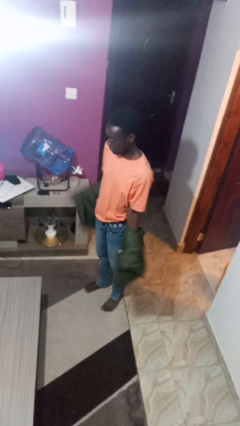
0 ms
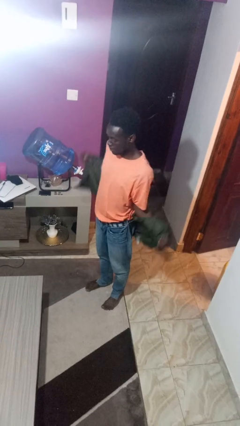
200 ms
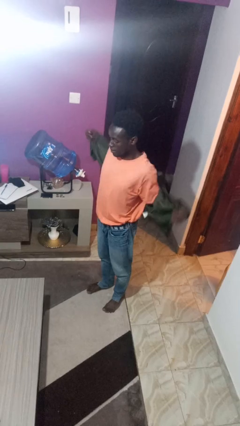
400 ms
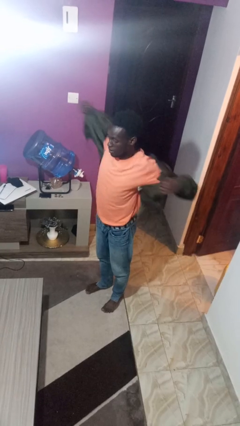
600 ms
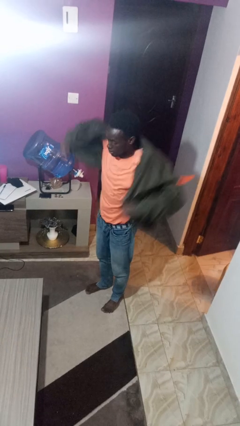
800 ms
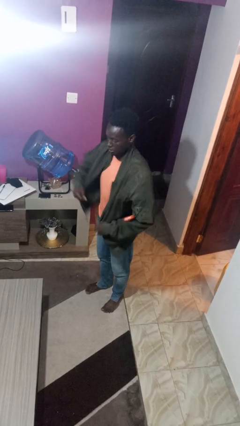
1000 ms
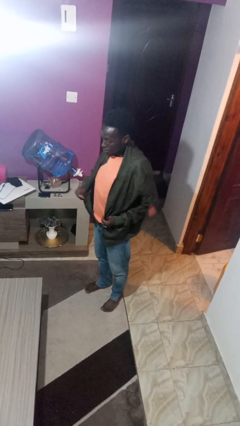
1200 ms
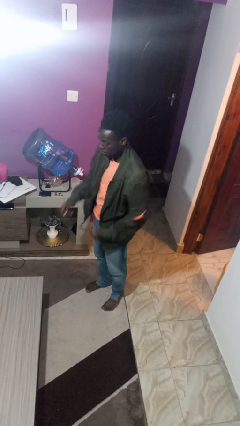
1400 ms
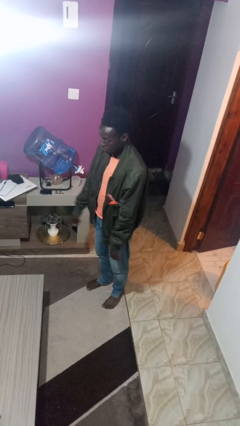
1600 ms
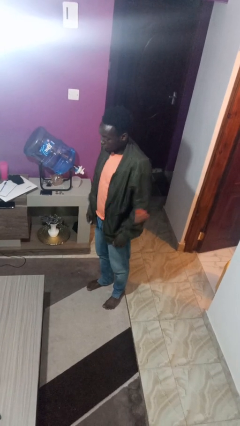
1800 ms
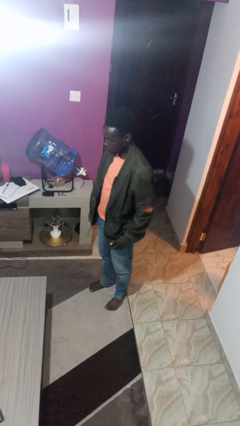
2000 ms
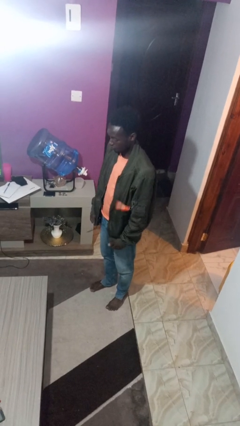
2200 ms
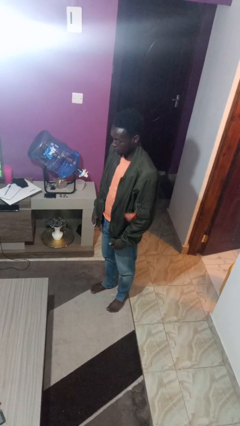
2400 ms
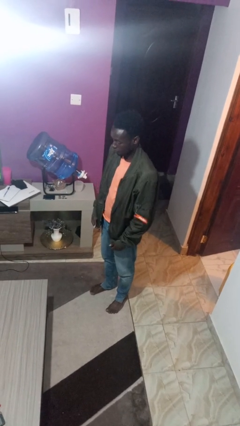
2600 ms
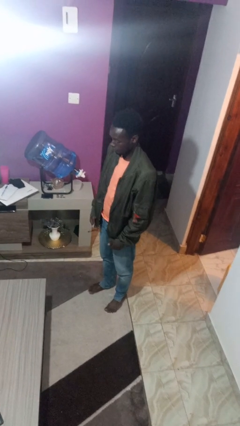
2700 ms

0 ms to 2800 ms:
person puts on jacket

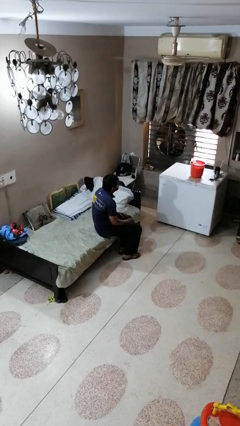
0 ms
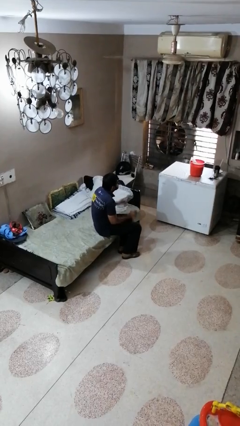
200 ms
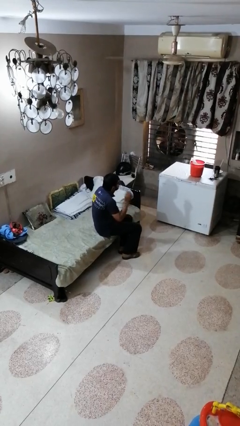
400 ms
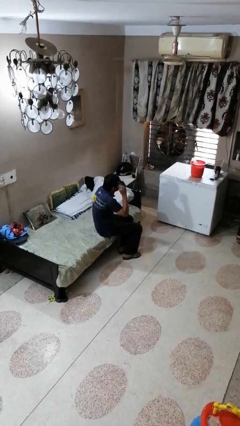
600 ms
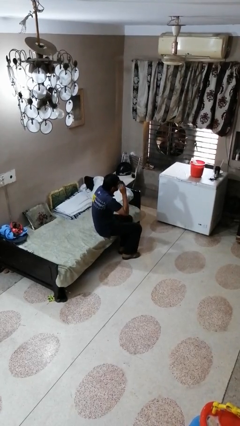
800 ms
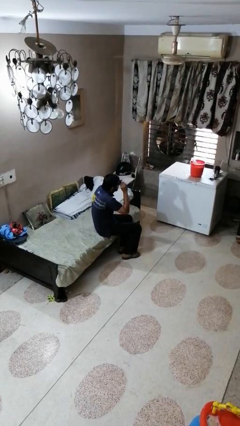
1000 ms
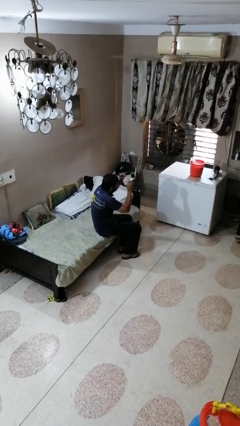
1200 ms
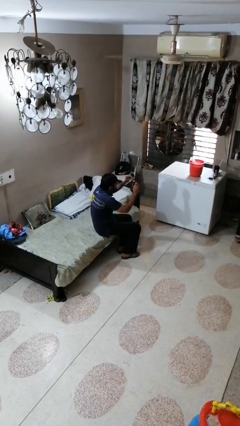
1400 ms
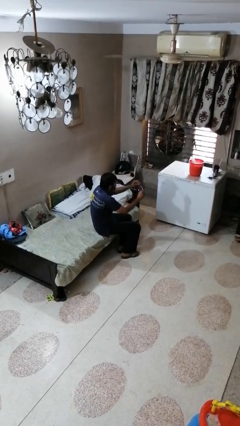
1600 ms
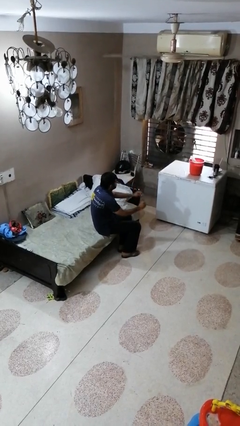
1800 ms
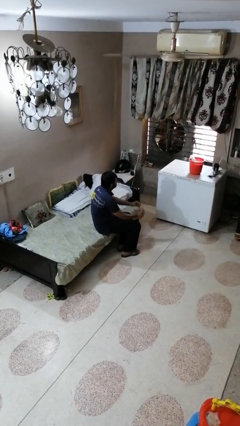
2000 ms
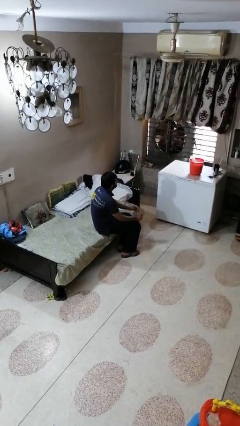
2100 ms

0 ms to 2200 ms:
person takes off glasses

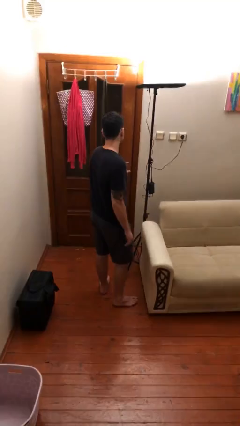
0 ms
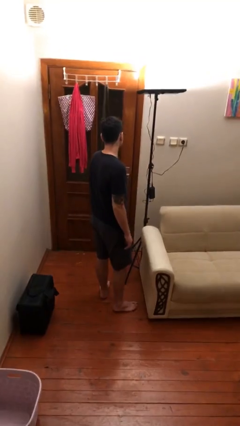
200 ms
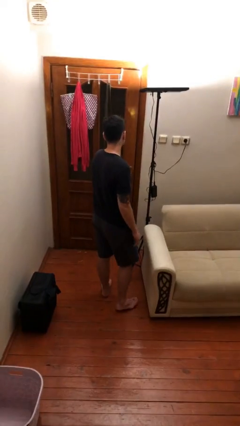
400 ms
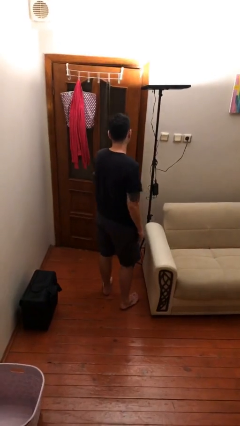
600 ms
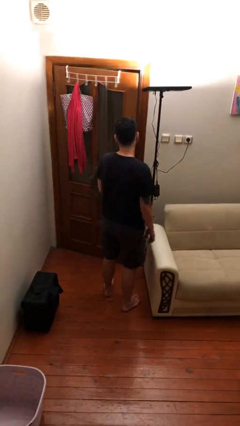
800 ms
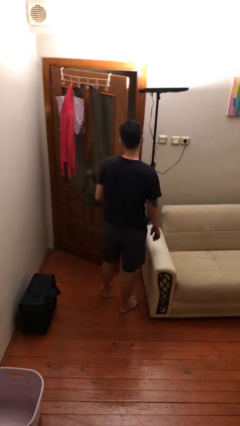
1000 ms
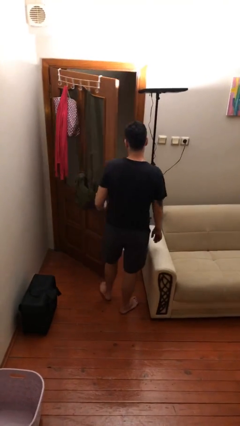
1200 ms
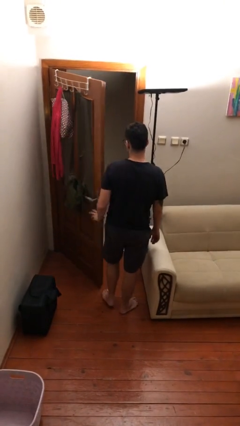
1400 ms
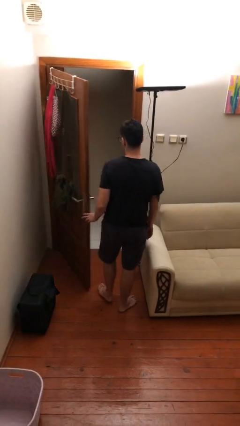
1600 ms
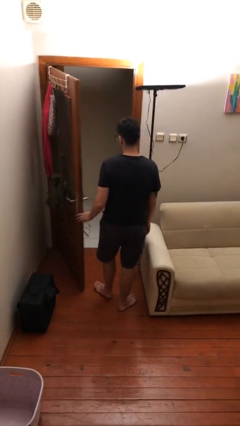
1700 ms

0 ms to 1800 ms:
person opens facility door

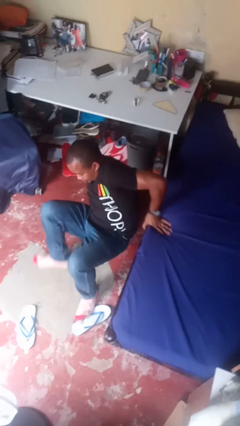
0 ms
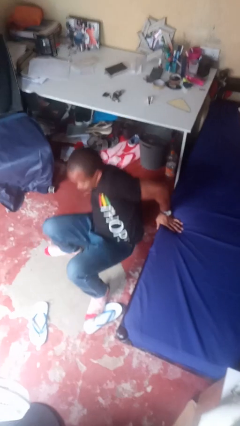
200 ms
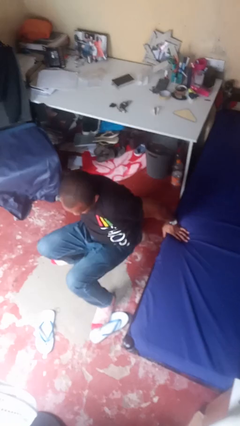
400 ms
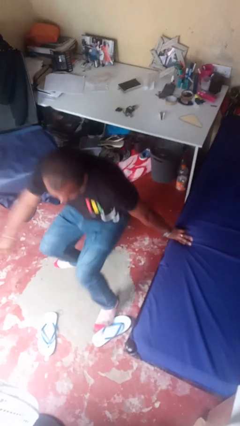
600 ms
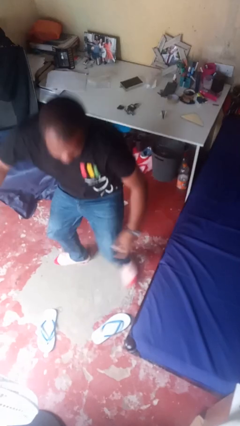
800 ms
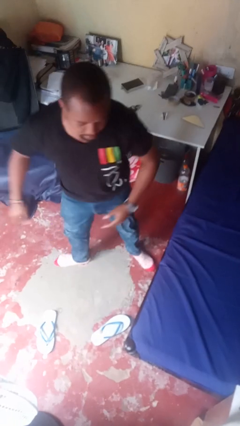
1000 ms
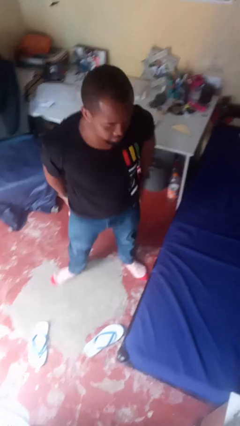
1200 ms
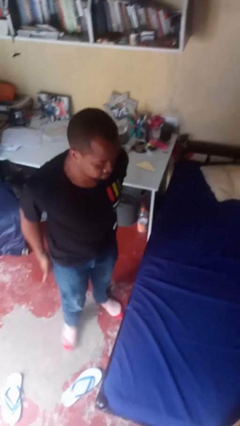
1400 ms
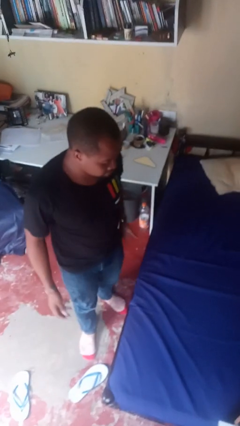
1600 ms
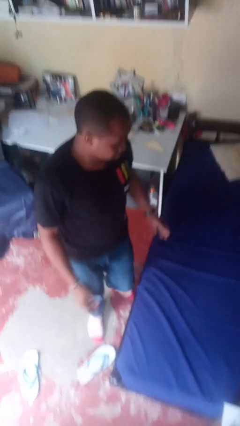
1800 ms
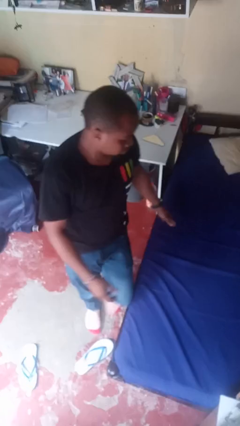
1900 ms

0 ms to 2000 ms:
person stands up from floor

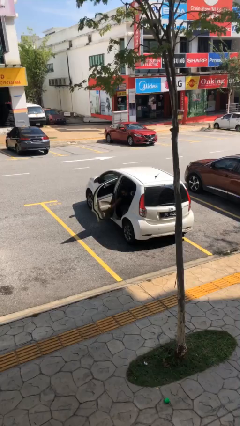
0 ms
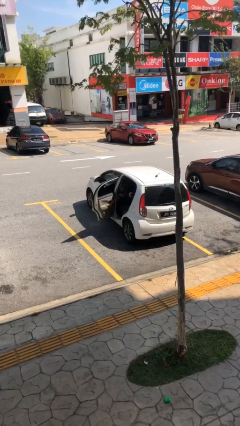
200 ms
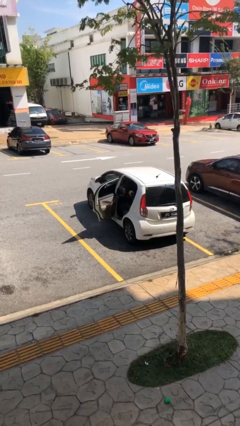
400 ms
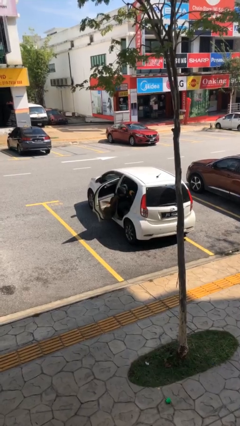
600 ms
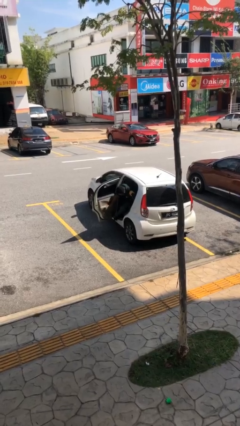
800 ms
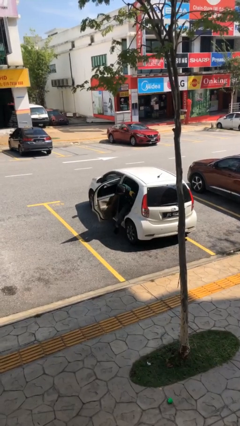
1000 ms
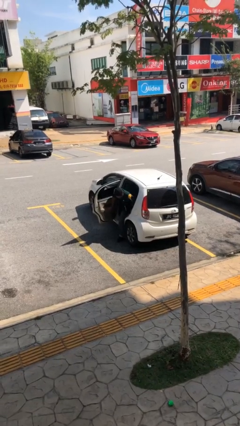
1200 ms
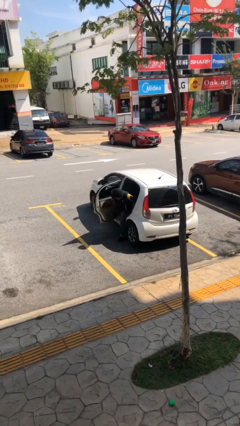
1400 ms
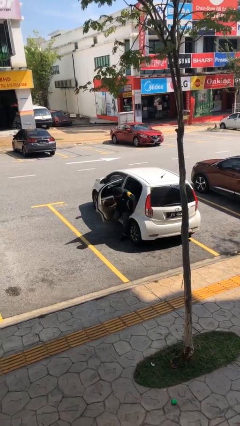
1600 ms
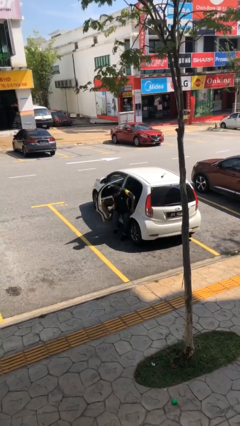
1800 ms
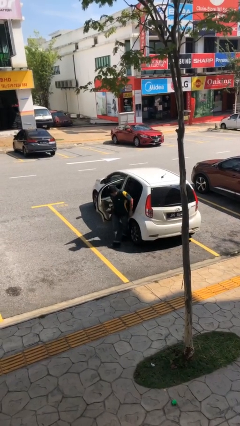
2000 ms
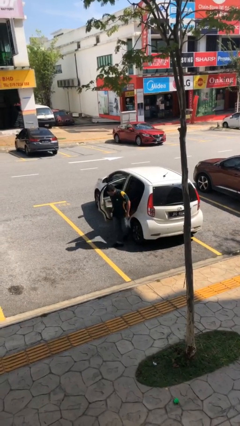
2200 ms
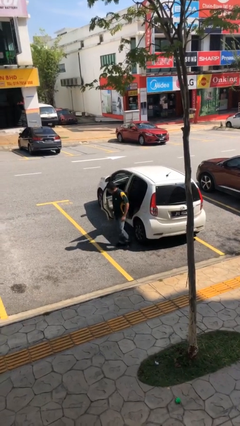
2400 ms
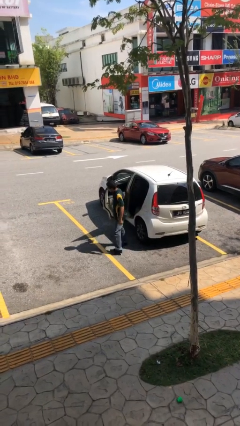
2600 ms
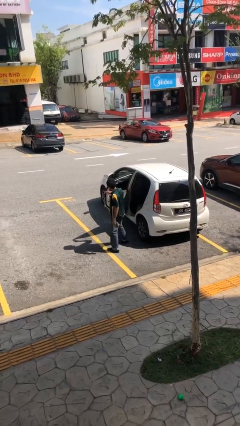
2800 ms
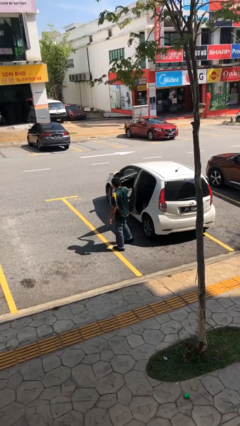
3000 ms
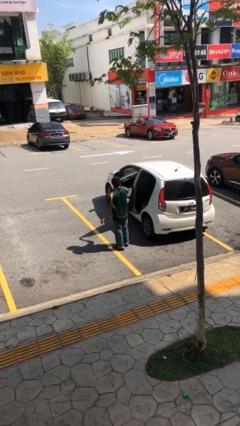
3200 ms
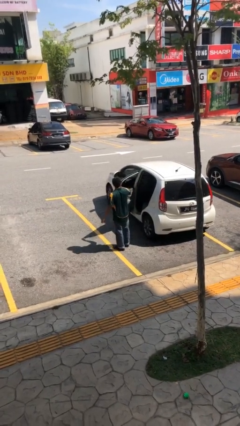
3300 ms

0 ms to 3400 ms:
person exits car

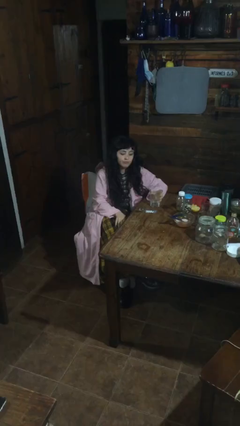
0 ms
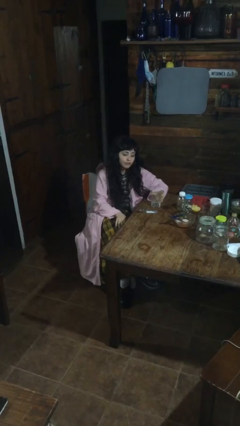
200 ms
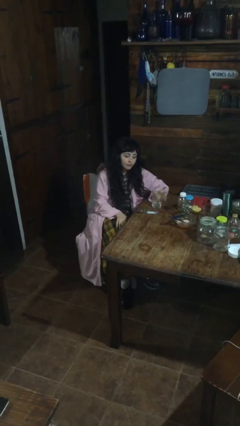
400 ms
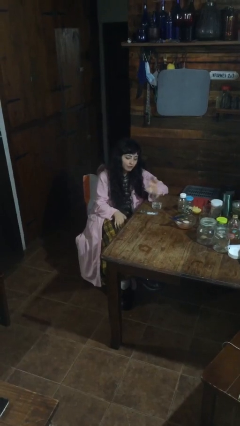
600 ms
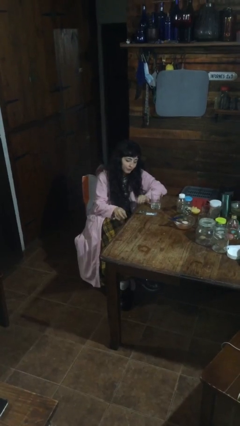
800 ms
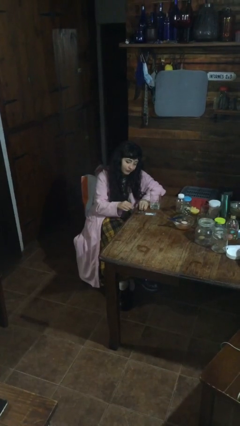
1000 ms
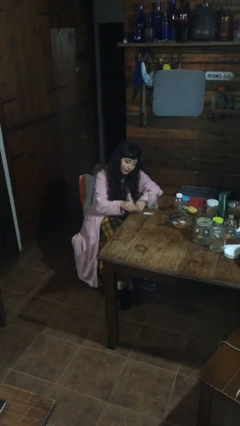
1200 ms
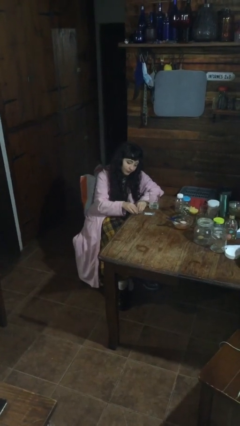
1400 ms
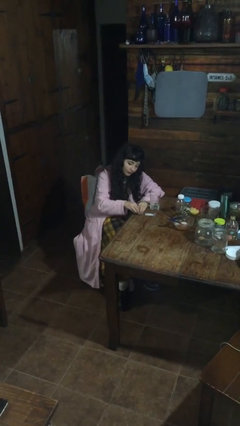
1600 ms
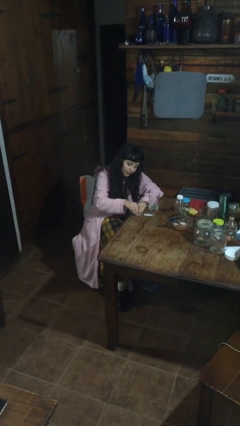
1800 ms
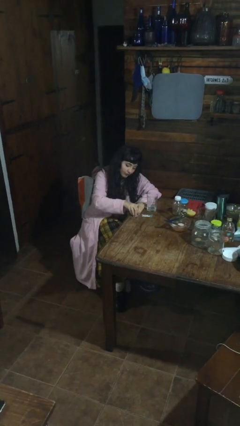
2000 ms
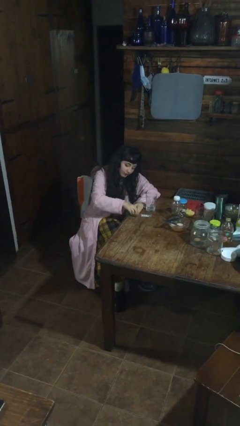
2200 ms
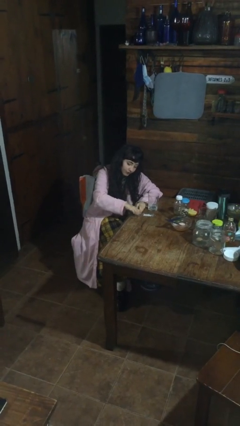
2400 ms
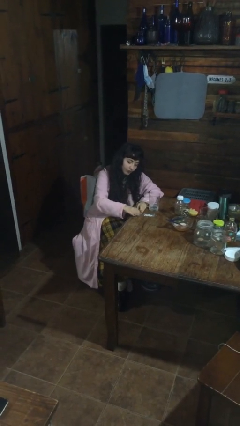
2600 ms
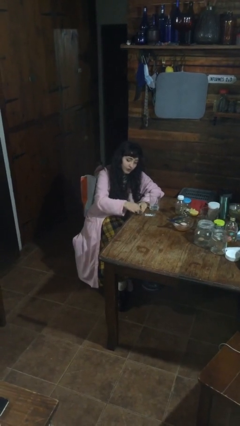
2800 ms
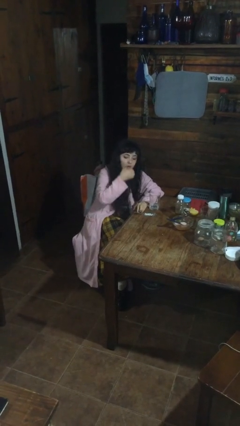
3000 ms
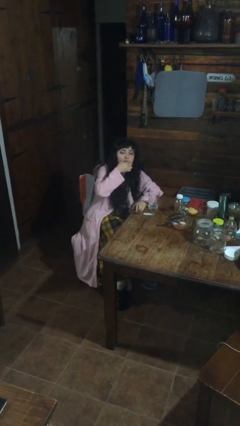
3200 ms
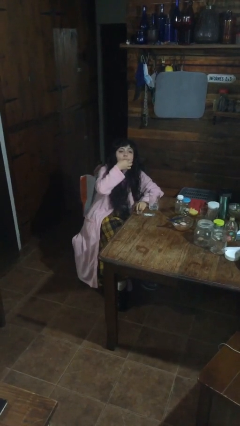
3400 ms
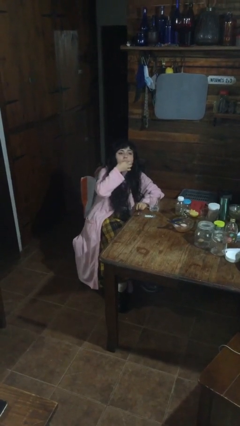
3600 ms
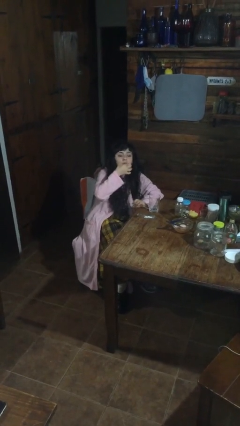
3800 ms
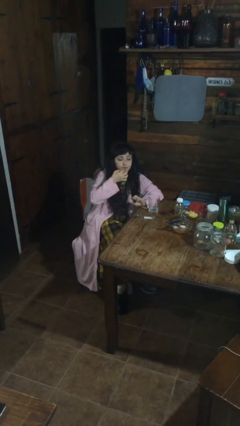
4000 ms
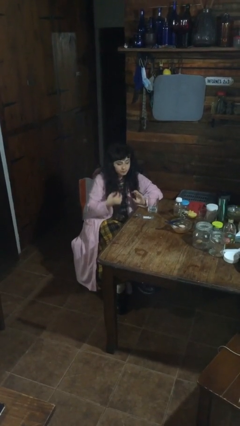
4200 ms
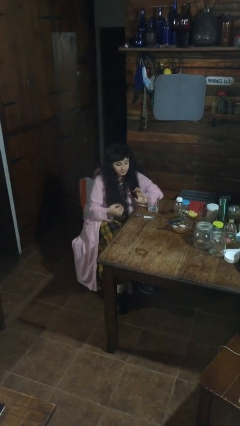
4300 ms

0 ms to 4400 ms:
person takes medicine pills

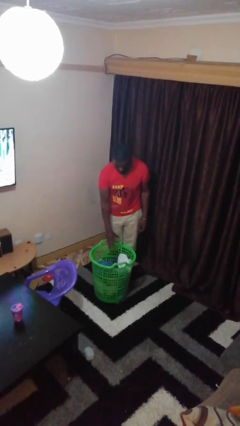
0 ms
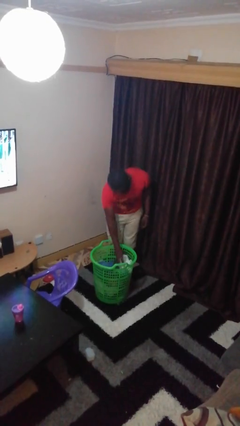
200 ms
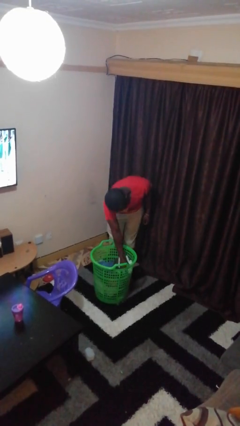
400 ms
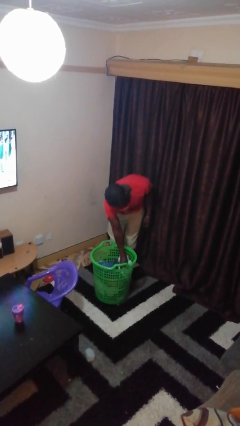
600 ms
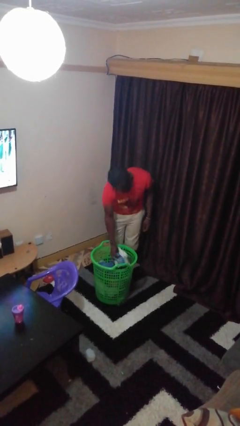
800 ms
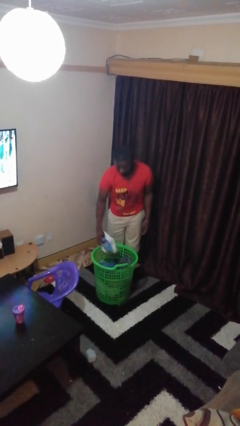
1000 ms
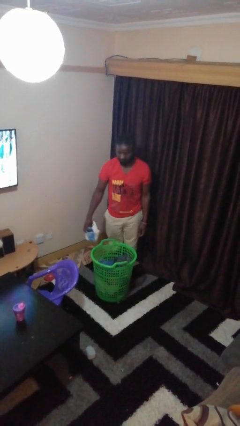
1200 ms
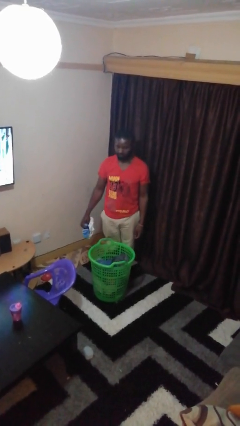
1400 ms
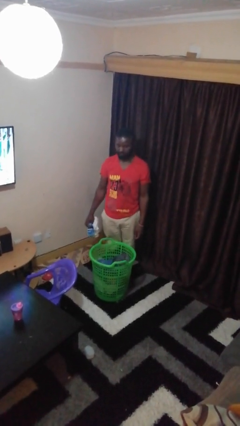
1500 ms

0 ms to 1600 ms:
person takes object from basket
